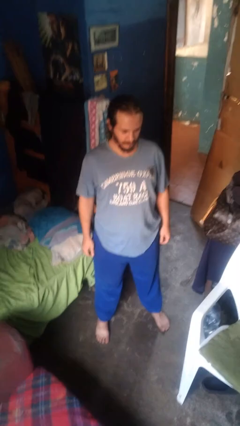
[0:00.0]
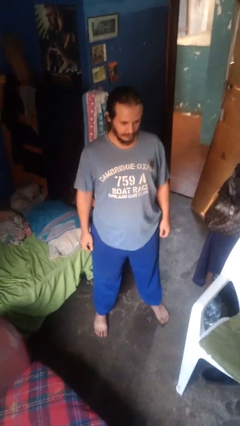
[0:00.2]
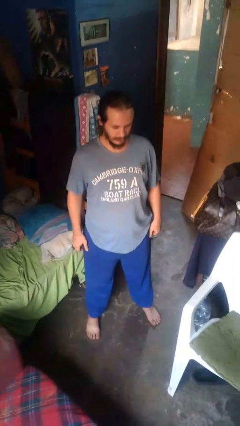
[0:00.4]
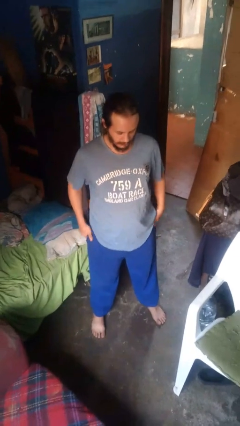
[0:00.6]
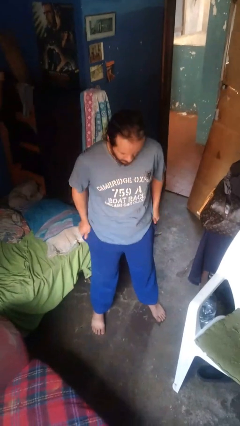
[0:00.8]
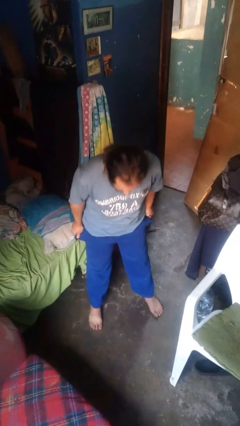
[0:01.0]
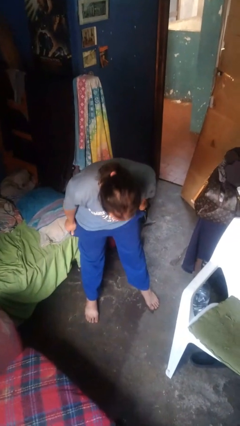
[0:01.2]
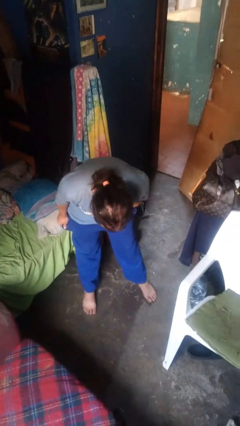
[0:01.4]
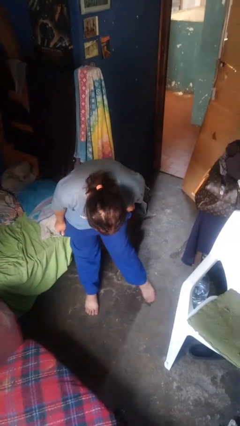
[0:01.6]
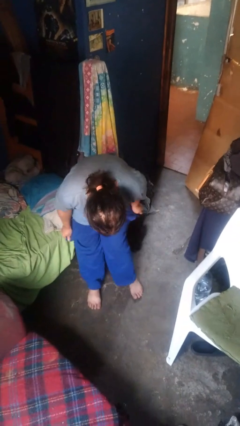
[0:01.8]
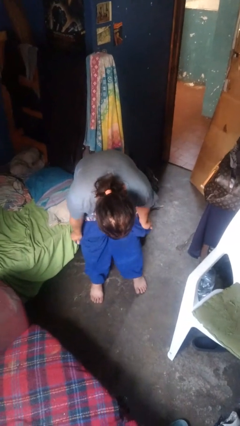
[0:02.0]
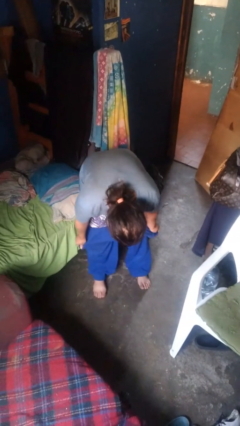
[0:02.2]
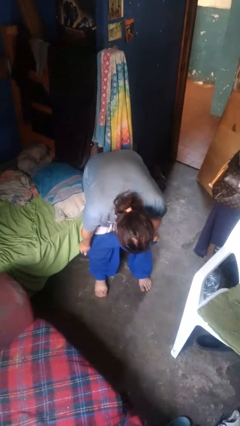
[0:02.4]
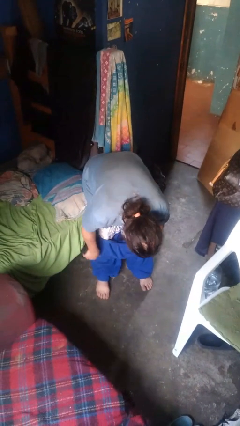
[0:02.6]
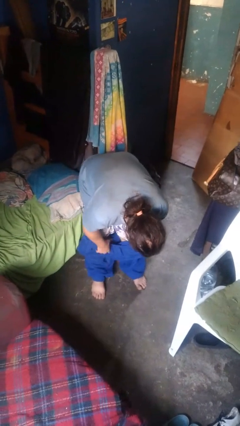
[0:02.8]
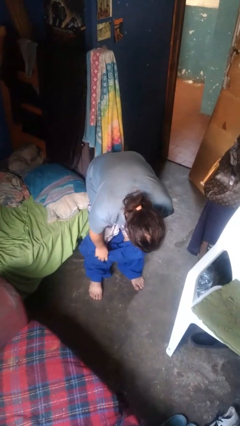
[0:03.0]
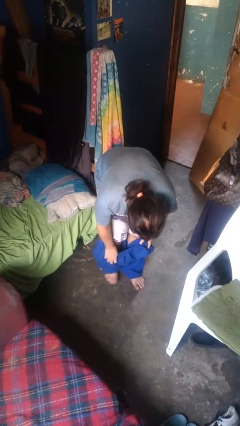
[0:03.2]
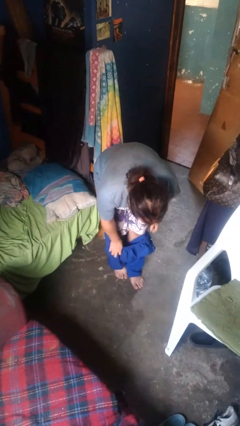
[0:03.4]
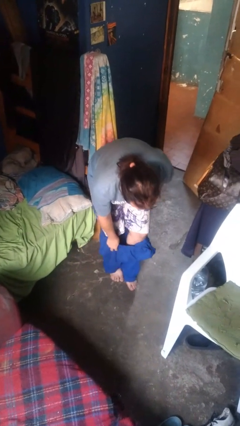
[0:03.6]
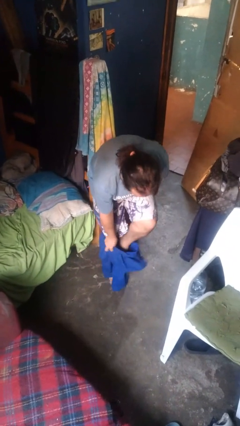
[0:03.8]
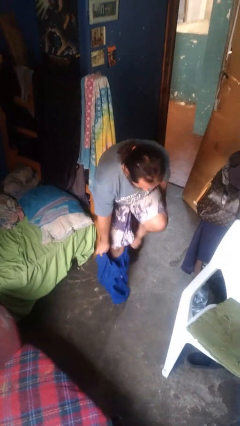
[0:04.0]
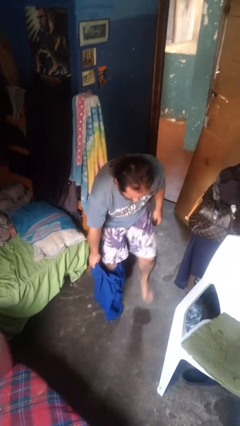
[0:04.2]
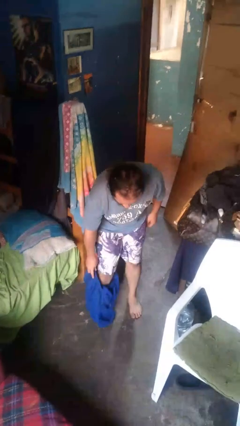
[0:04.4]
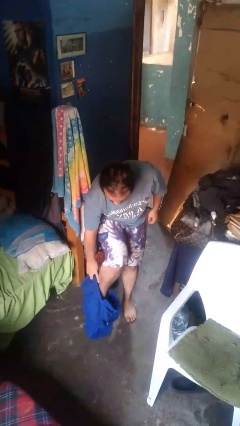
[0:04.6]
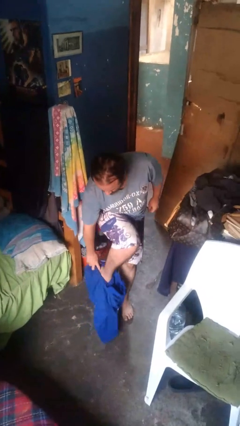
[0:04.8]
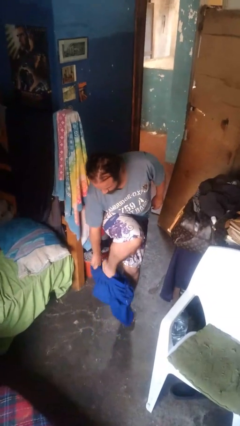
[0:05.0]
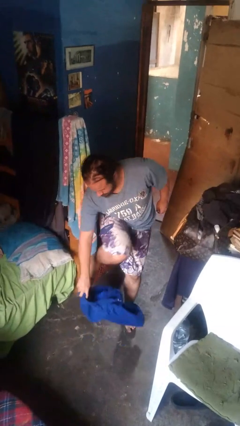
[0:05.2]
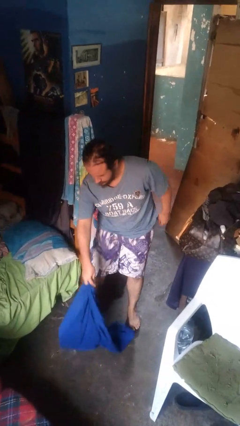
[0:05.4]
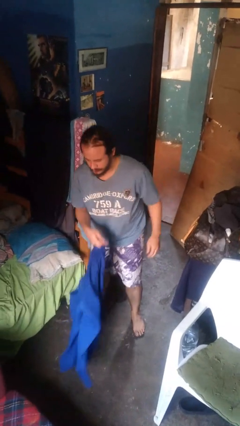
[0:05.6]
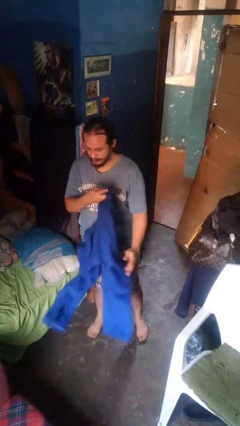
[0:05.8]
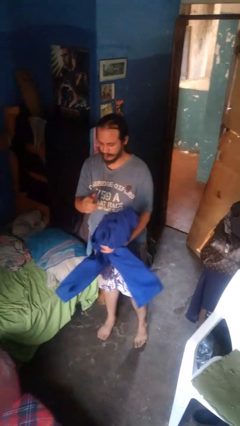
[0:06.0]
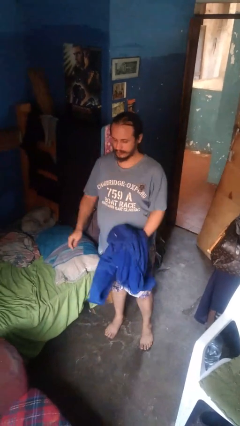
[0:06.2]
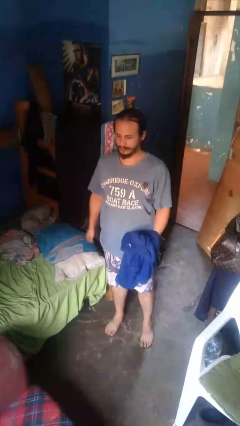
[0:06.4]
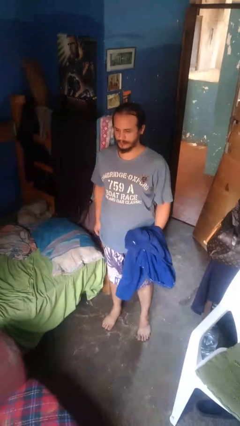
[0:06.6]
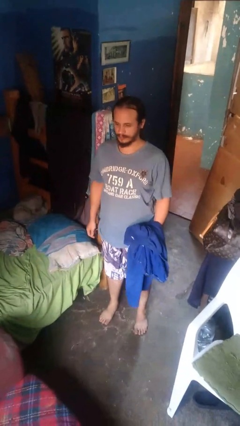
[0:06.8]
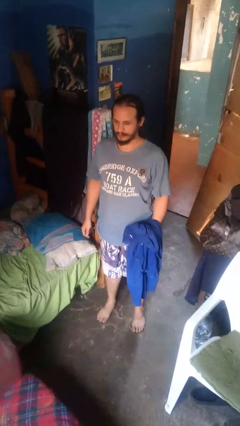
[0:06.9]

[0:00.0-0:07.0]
person takes off pants

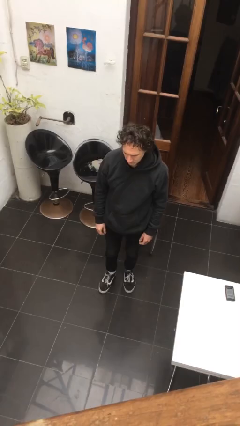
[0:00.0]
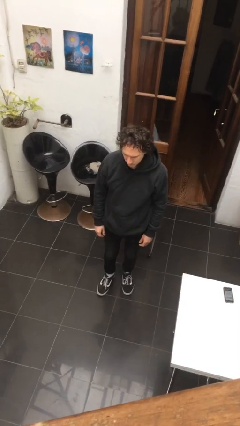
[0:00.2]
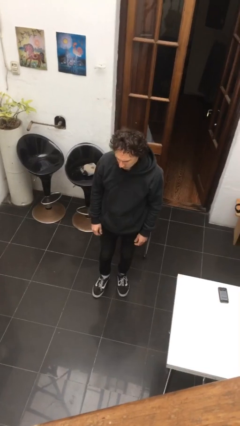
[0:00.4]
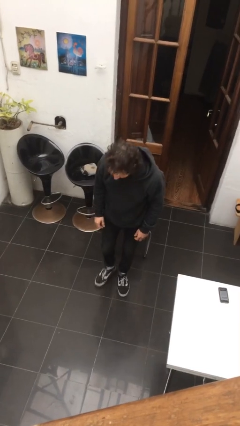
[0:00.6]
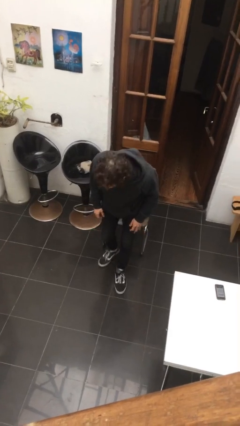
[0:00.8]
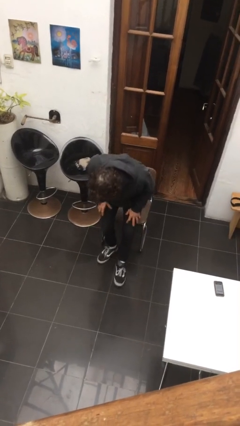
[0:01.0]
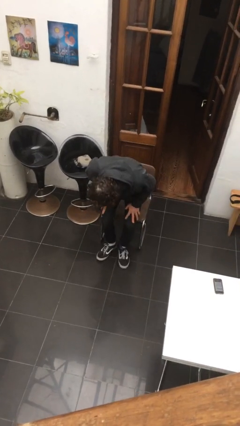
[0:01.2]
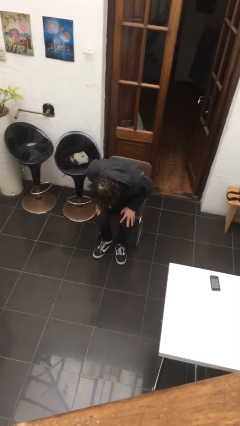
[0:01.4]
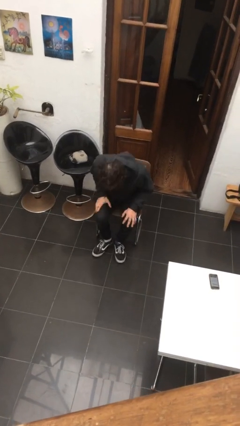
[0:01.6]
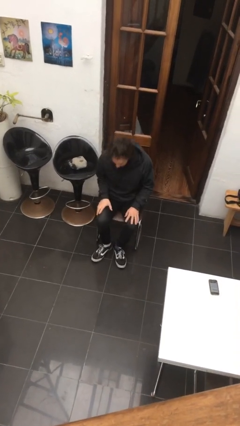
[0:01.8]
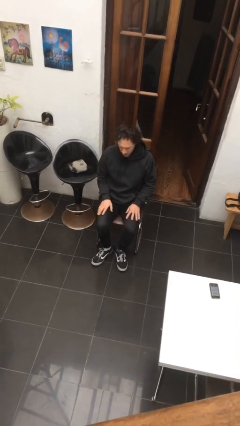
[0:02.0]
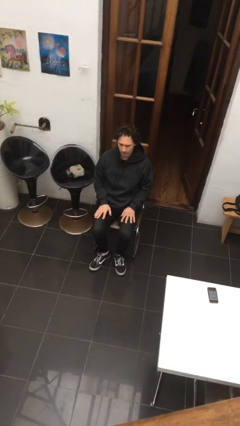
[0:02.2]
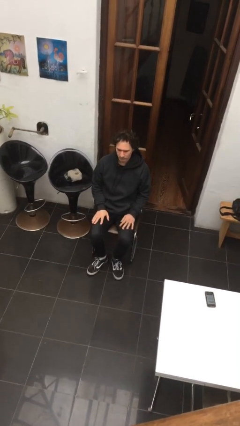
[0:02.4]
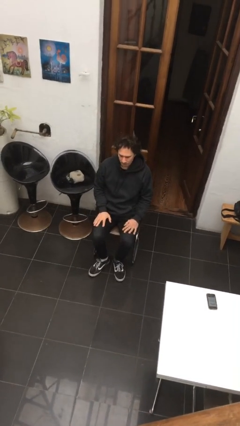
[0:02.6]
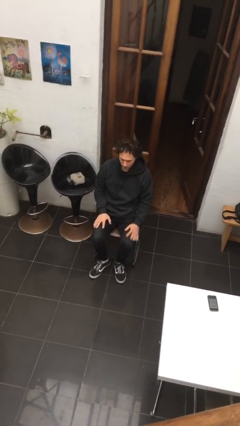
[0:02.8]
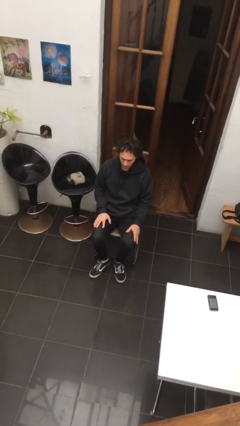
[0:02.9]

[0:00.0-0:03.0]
person sits down

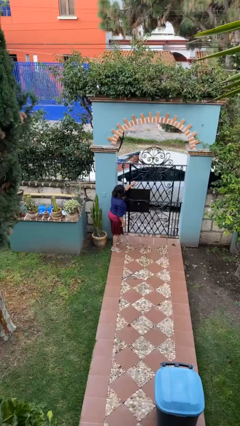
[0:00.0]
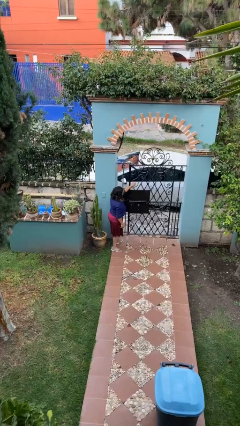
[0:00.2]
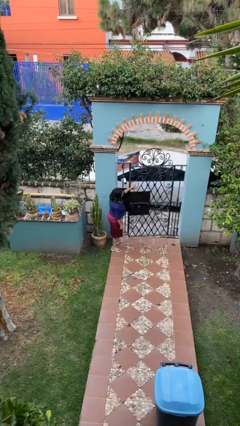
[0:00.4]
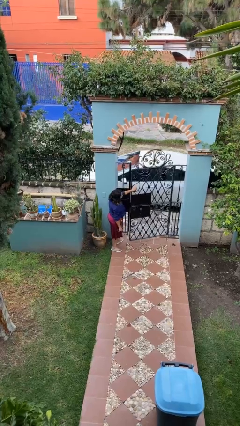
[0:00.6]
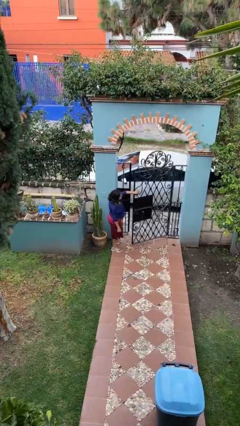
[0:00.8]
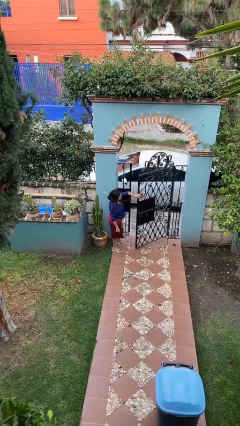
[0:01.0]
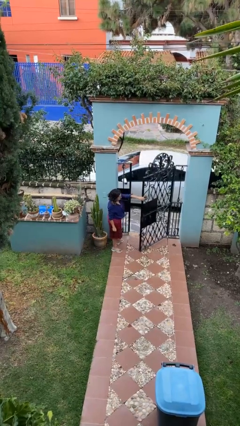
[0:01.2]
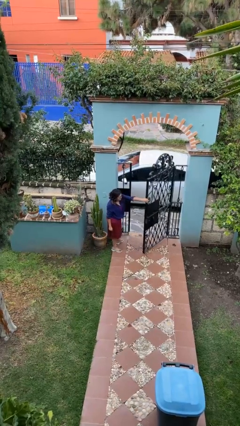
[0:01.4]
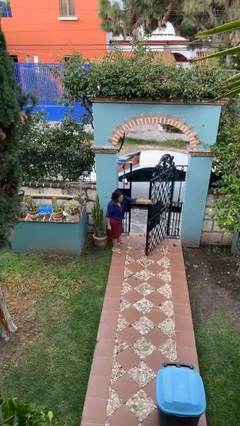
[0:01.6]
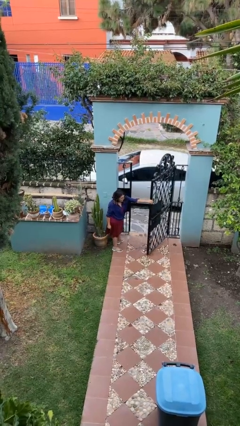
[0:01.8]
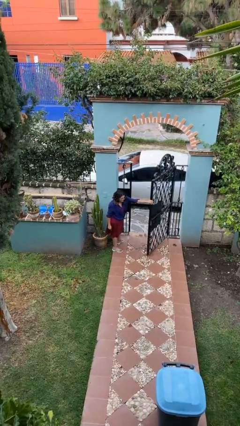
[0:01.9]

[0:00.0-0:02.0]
person opens facility door

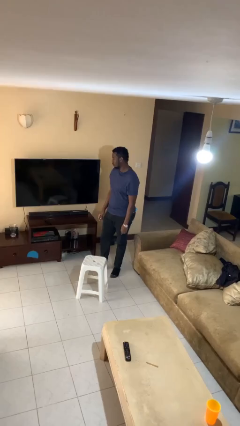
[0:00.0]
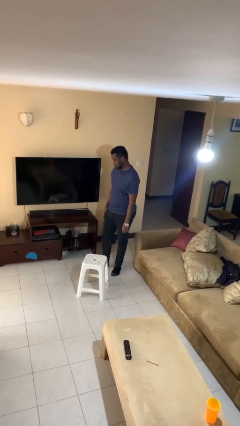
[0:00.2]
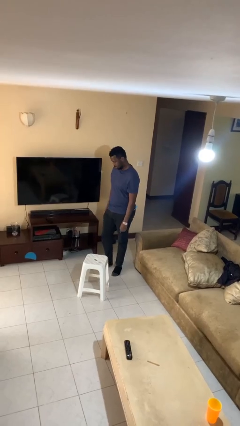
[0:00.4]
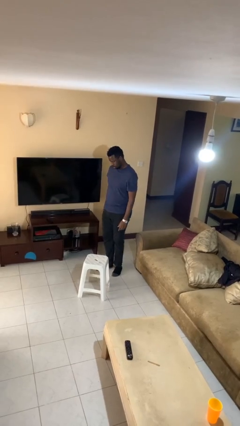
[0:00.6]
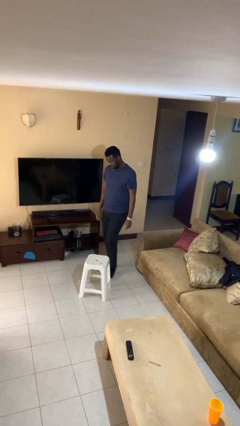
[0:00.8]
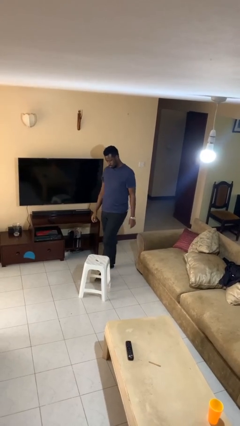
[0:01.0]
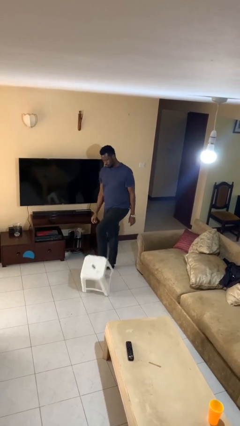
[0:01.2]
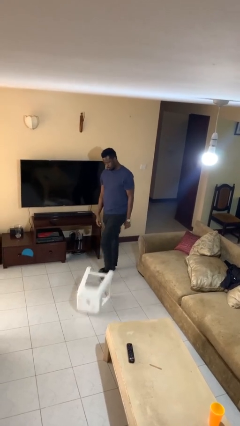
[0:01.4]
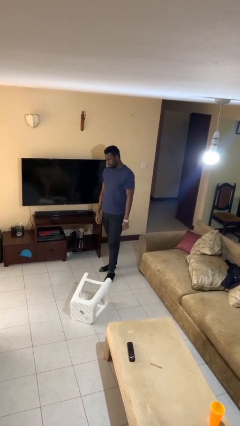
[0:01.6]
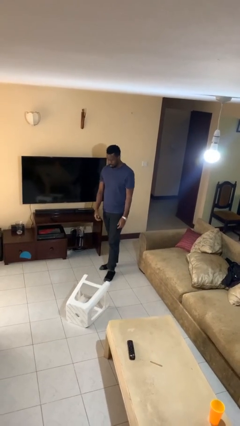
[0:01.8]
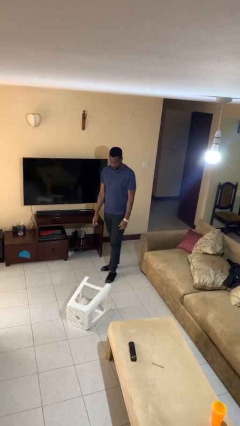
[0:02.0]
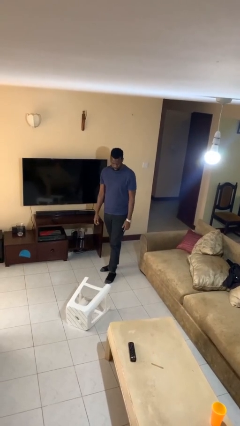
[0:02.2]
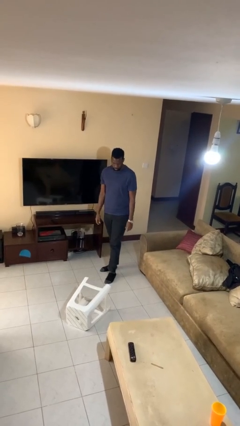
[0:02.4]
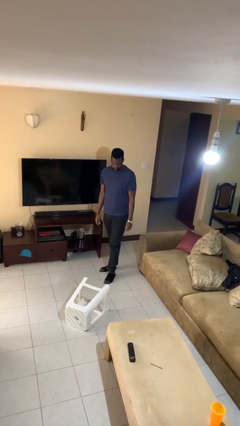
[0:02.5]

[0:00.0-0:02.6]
person knocks over furniture

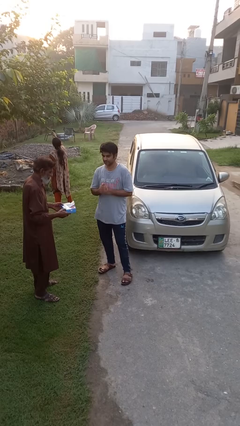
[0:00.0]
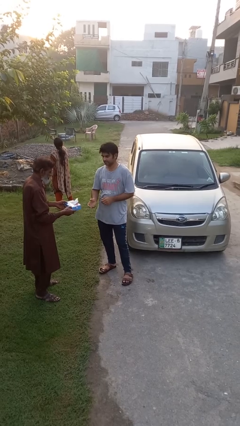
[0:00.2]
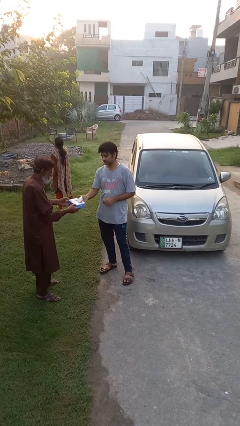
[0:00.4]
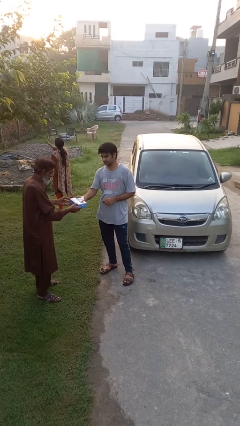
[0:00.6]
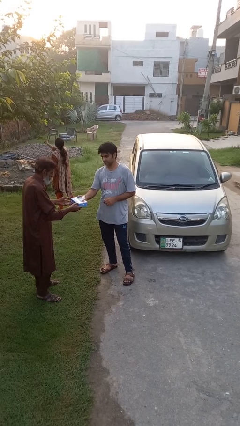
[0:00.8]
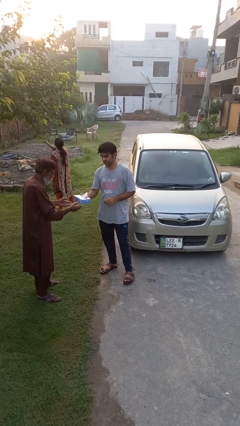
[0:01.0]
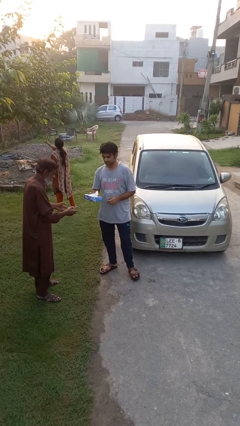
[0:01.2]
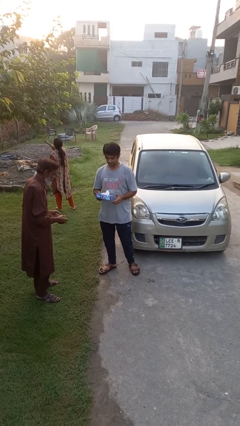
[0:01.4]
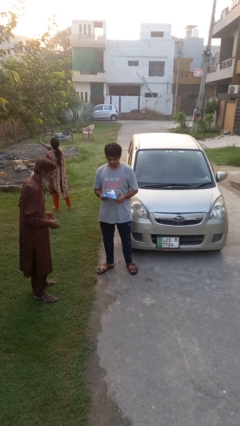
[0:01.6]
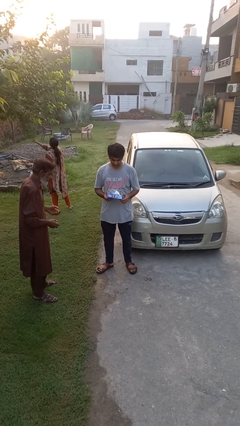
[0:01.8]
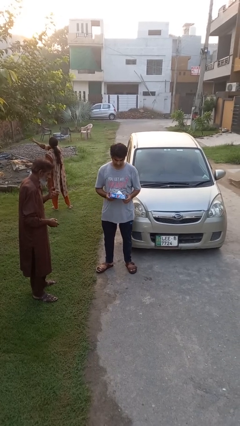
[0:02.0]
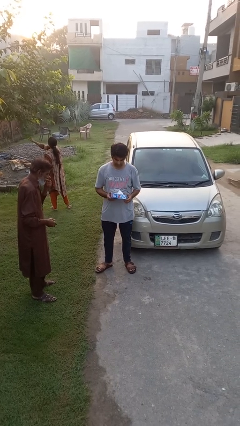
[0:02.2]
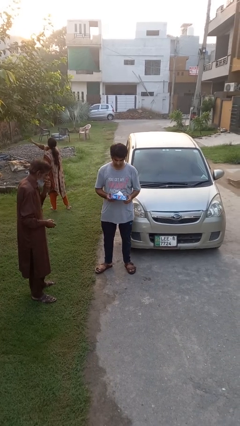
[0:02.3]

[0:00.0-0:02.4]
person transfers object to person
